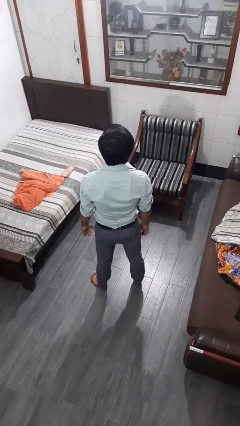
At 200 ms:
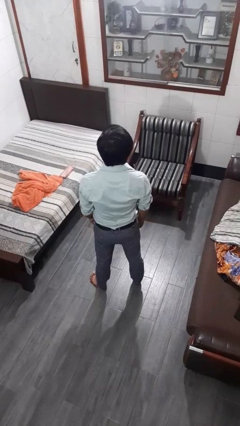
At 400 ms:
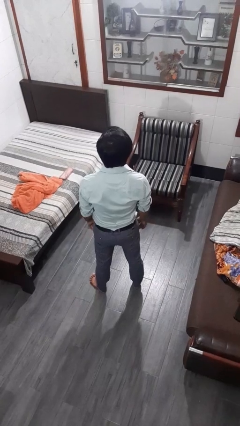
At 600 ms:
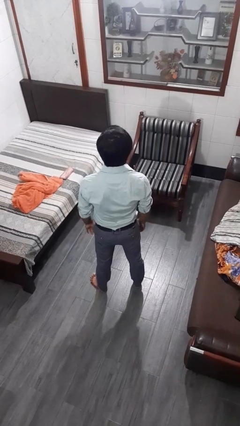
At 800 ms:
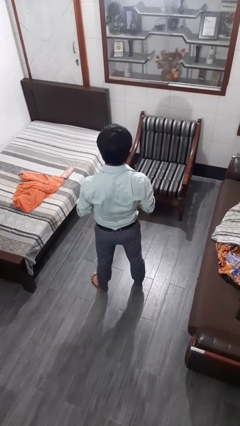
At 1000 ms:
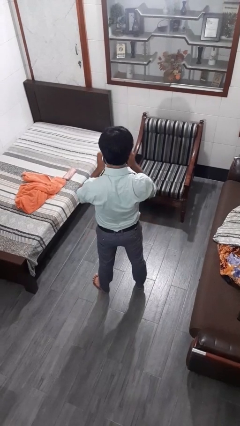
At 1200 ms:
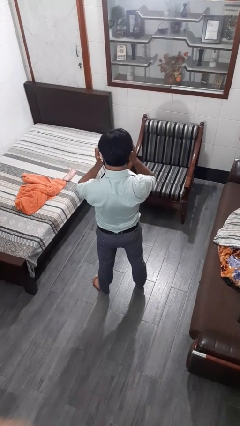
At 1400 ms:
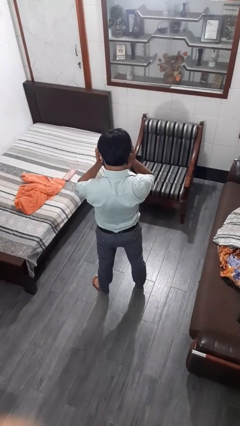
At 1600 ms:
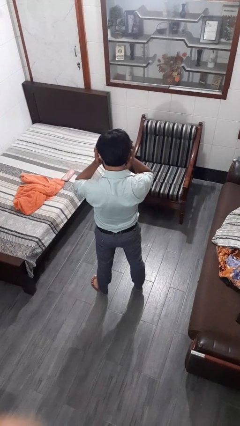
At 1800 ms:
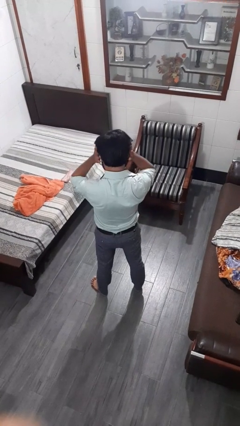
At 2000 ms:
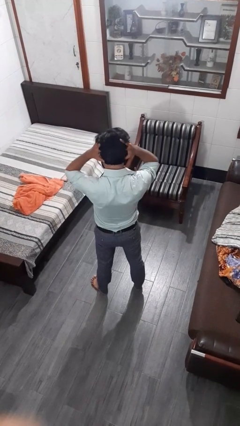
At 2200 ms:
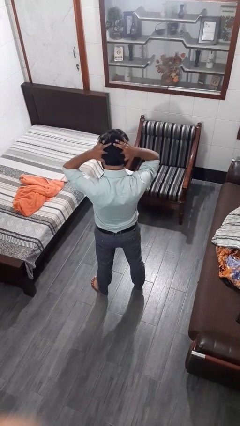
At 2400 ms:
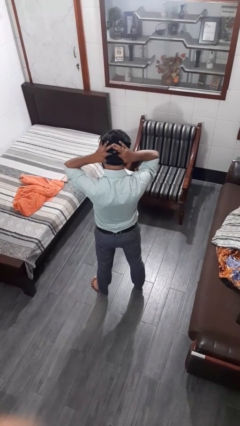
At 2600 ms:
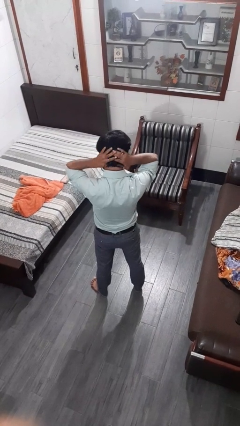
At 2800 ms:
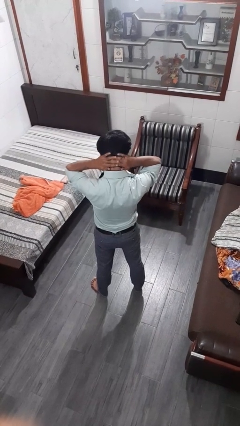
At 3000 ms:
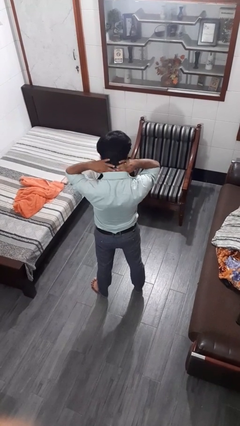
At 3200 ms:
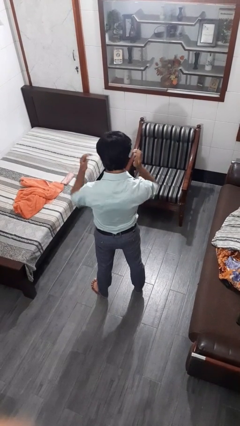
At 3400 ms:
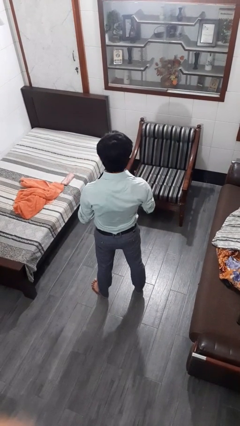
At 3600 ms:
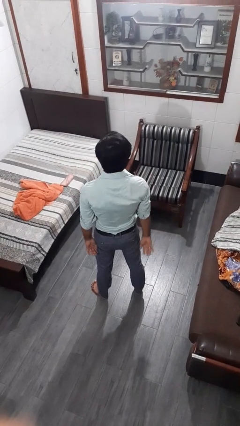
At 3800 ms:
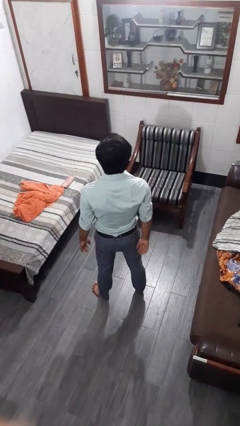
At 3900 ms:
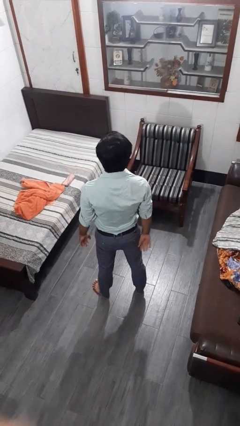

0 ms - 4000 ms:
person strokes hair

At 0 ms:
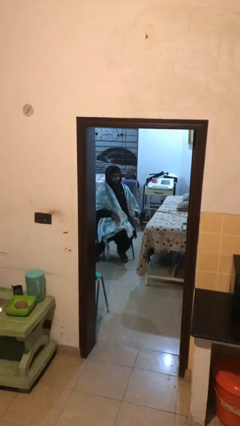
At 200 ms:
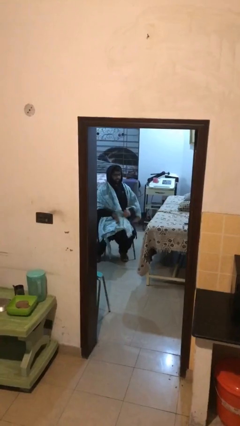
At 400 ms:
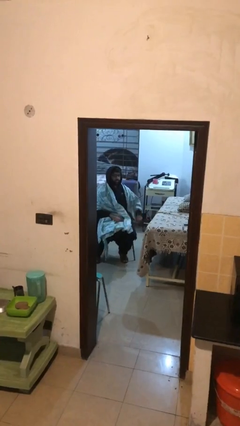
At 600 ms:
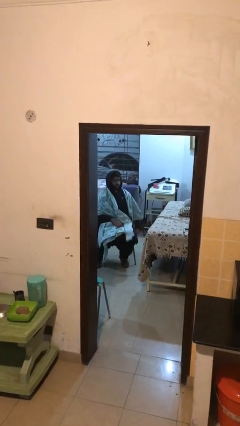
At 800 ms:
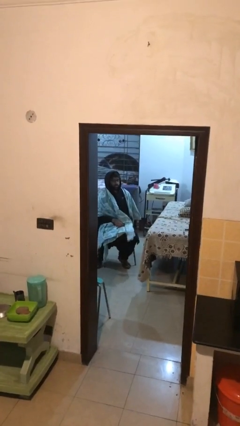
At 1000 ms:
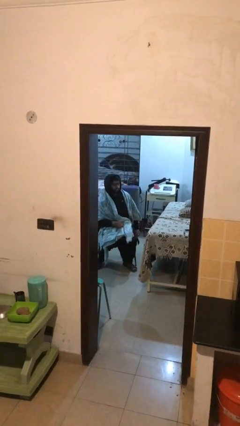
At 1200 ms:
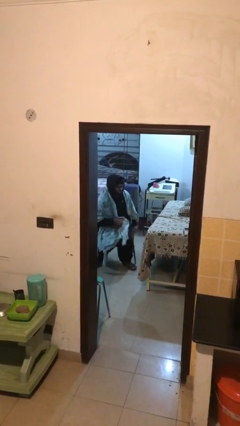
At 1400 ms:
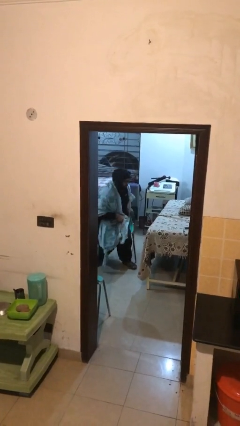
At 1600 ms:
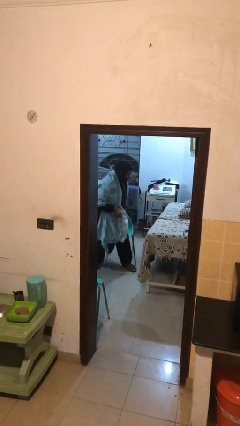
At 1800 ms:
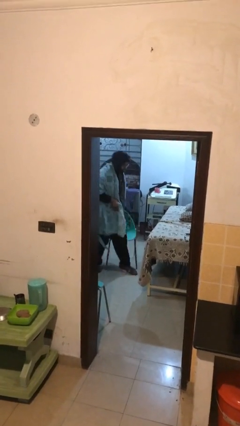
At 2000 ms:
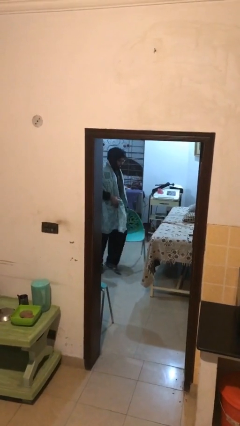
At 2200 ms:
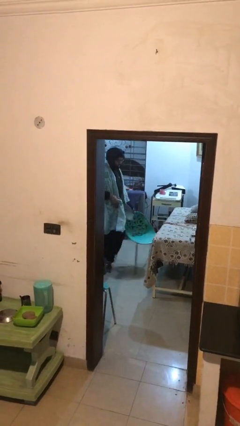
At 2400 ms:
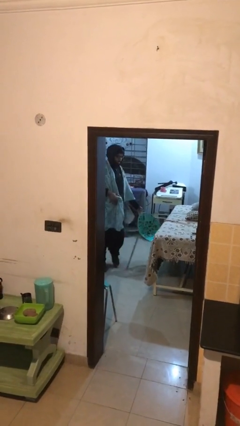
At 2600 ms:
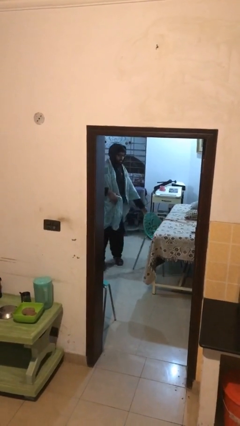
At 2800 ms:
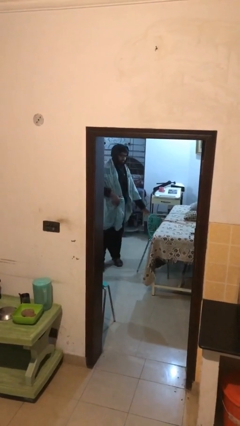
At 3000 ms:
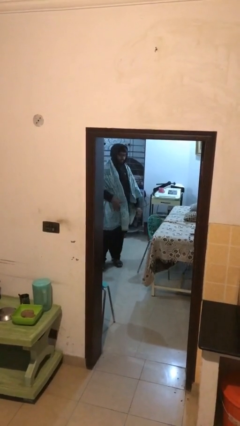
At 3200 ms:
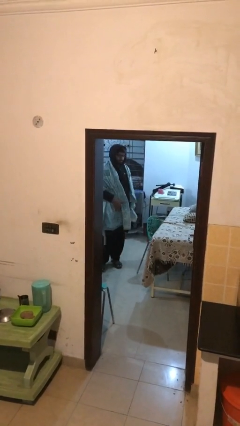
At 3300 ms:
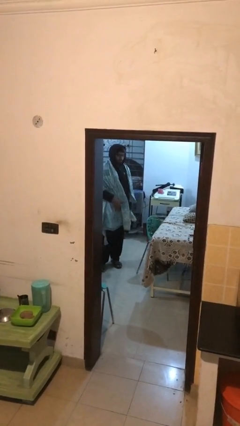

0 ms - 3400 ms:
person stands up

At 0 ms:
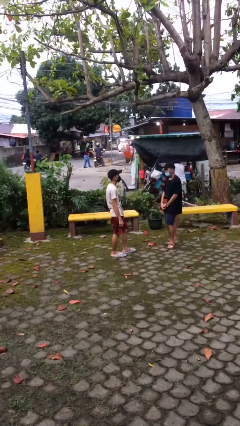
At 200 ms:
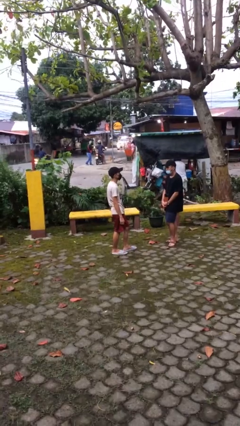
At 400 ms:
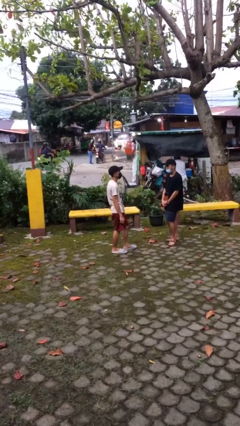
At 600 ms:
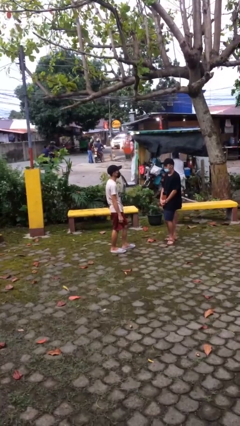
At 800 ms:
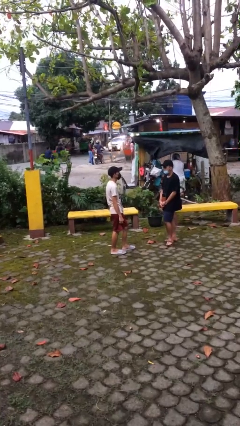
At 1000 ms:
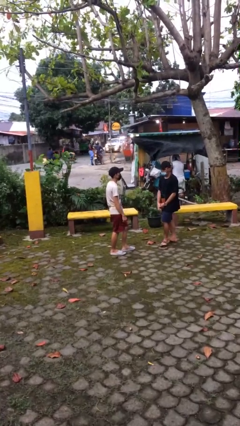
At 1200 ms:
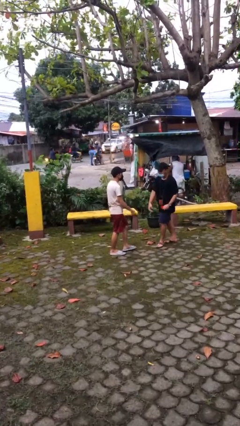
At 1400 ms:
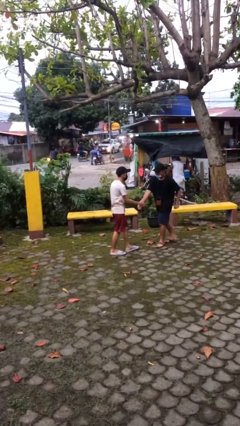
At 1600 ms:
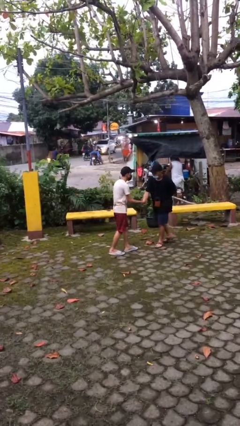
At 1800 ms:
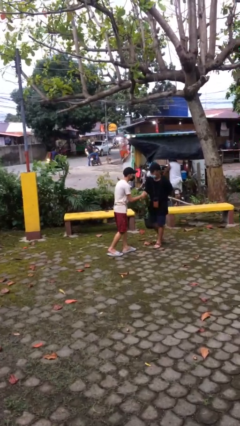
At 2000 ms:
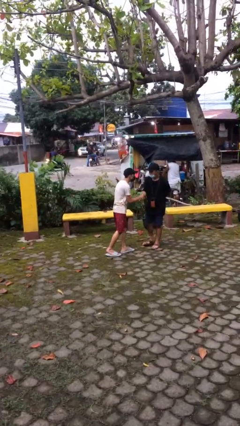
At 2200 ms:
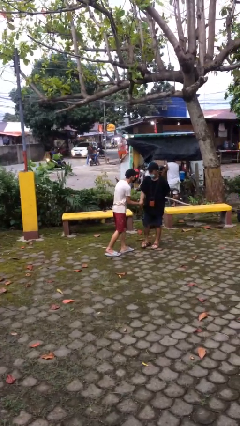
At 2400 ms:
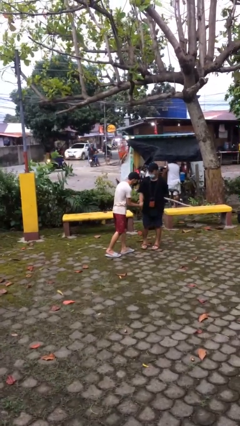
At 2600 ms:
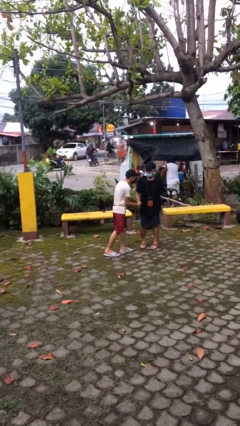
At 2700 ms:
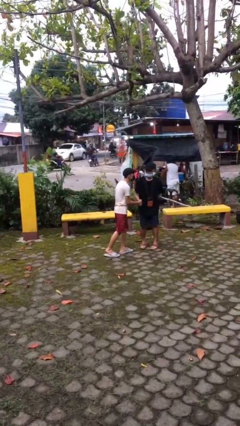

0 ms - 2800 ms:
person shakes hand

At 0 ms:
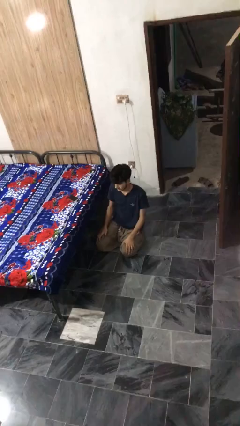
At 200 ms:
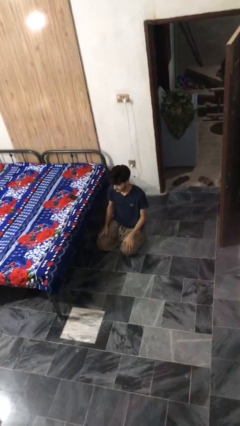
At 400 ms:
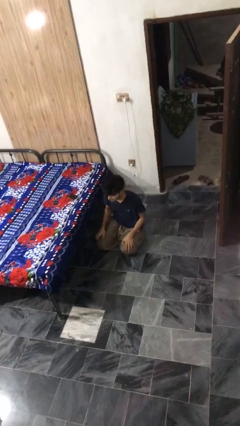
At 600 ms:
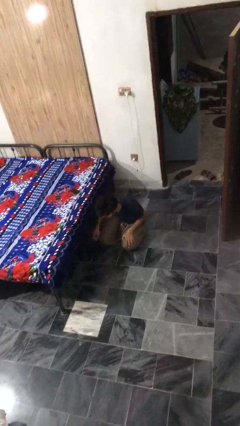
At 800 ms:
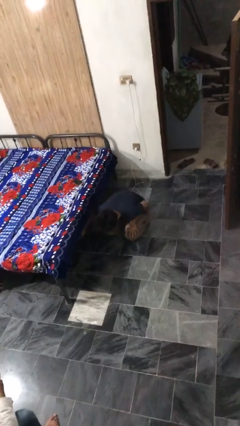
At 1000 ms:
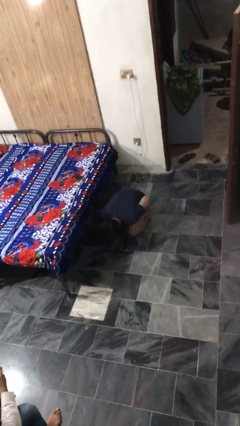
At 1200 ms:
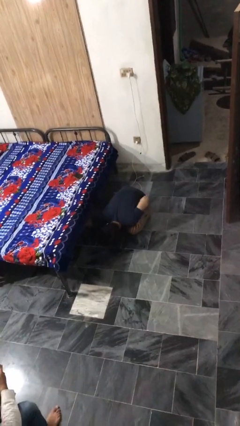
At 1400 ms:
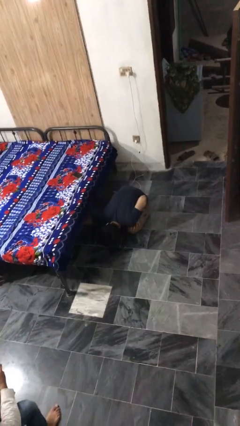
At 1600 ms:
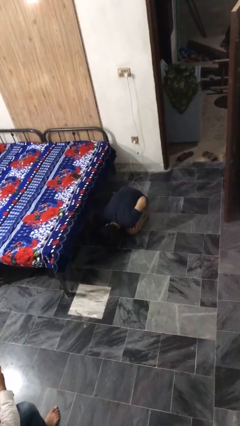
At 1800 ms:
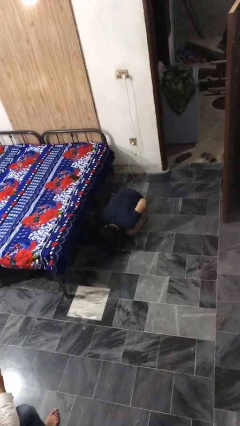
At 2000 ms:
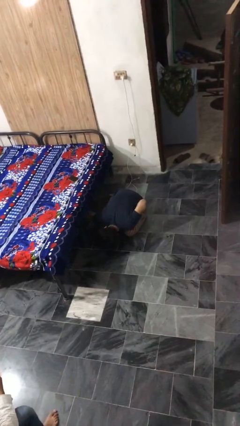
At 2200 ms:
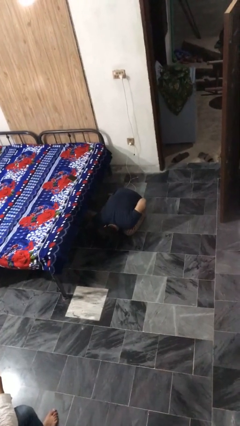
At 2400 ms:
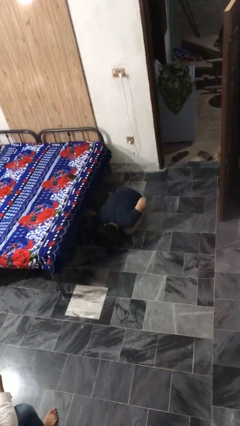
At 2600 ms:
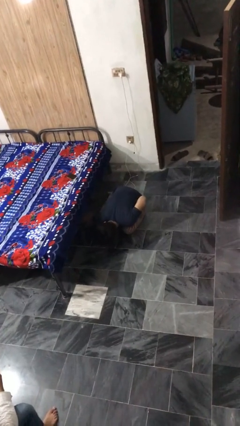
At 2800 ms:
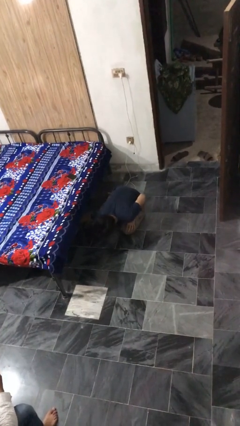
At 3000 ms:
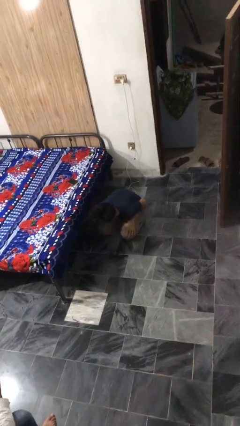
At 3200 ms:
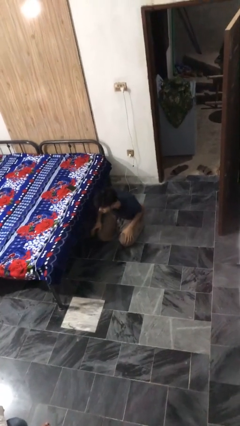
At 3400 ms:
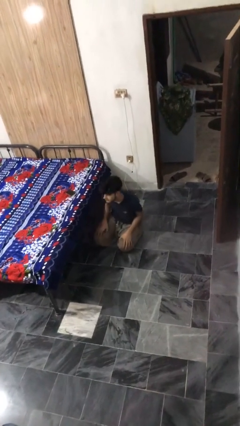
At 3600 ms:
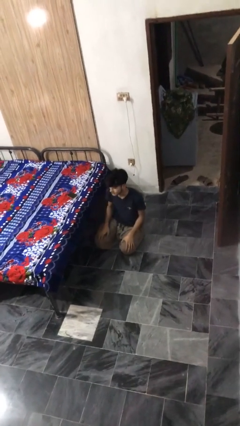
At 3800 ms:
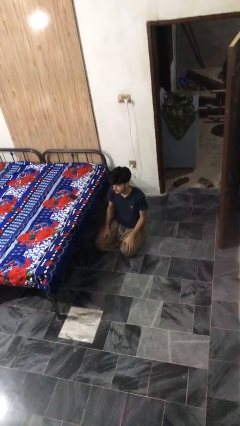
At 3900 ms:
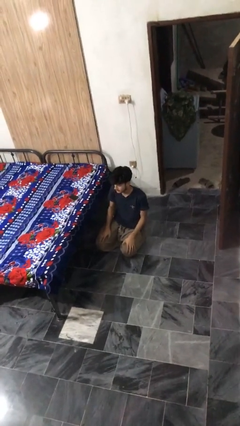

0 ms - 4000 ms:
person searches under bed

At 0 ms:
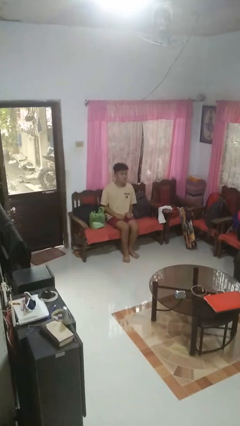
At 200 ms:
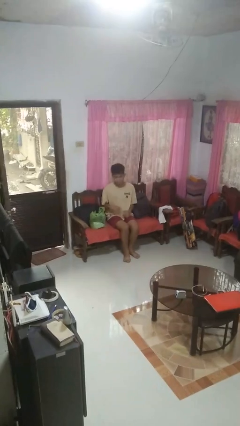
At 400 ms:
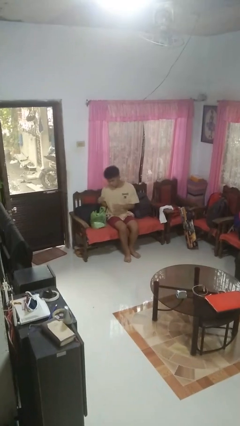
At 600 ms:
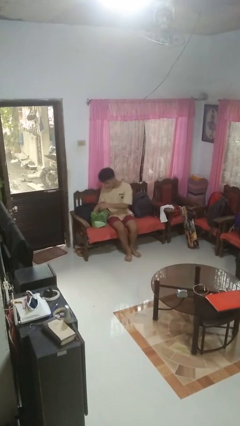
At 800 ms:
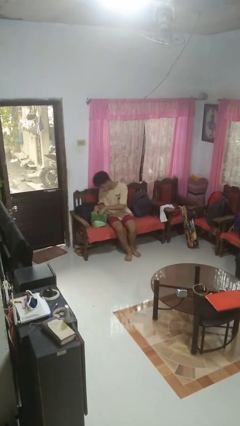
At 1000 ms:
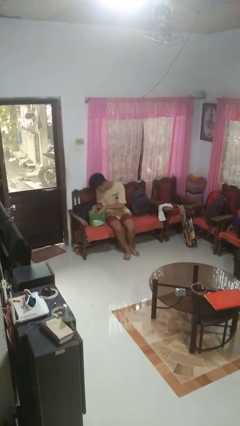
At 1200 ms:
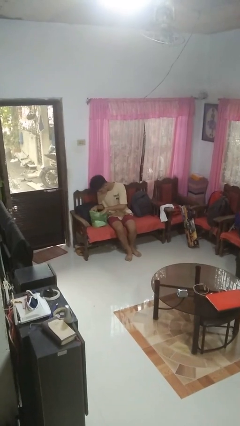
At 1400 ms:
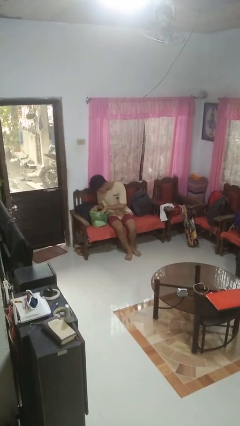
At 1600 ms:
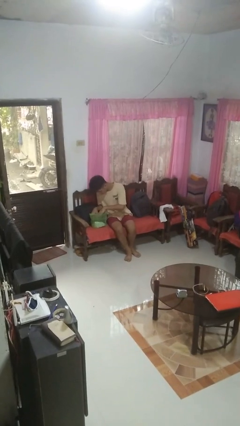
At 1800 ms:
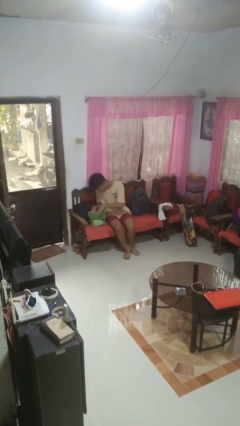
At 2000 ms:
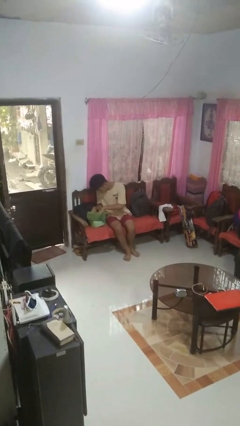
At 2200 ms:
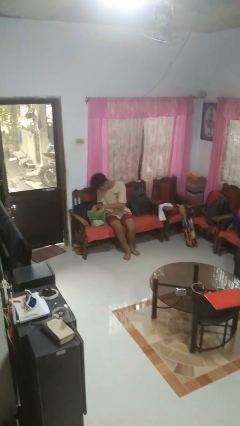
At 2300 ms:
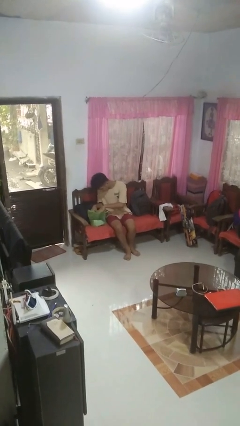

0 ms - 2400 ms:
person searches in bag

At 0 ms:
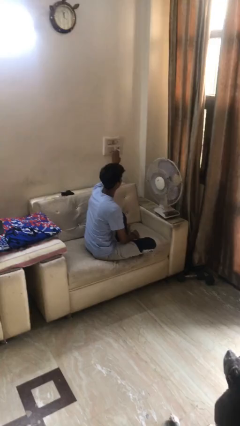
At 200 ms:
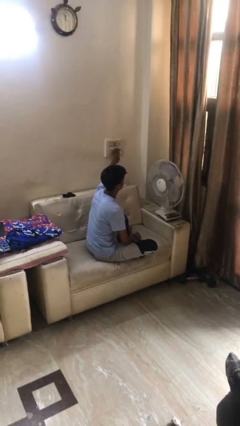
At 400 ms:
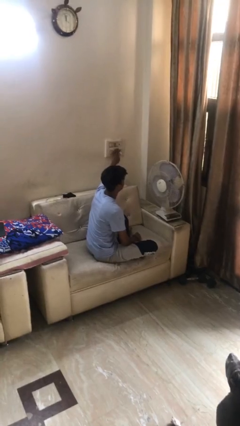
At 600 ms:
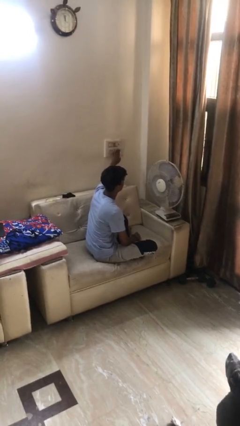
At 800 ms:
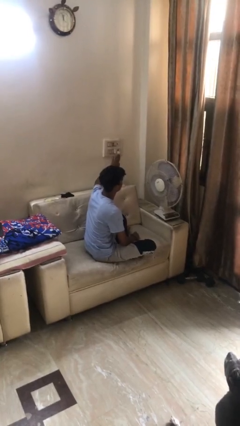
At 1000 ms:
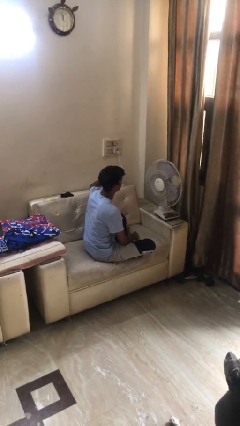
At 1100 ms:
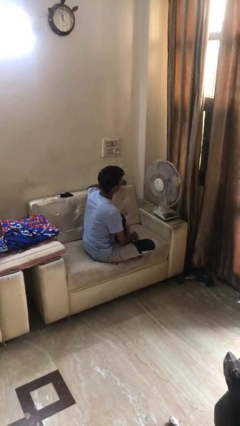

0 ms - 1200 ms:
person turns off fan
